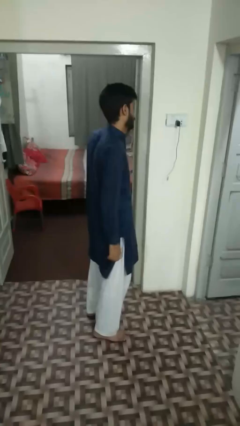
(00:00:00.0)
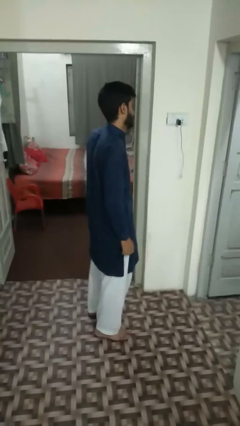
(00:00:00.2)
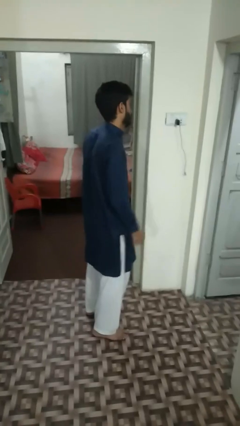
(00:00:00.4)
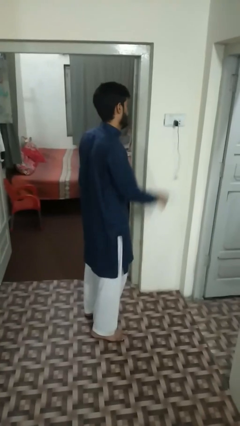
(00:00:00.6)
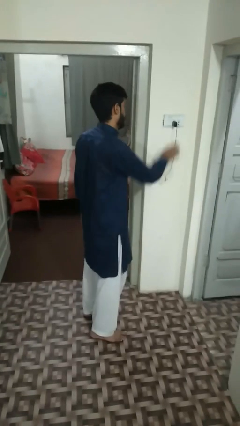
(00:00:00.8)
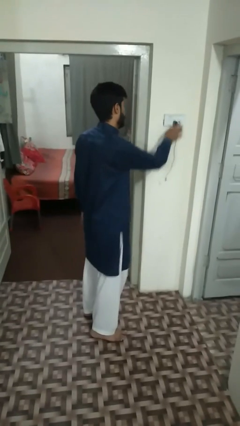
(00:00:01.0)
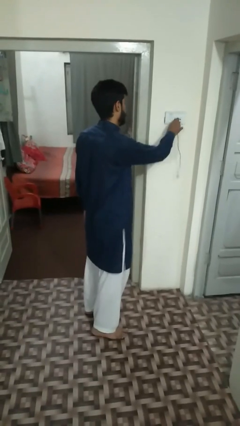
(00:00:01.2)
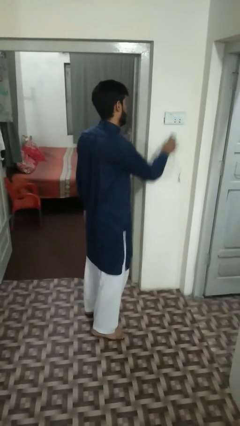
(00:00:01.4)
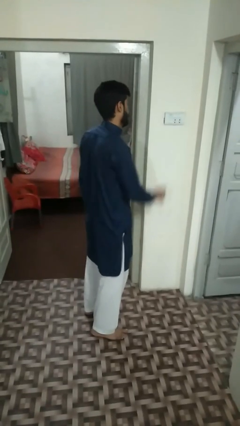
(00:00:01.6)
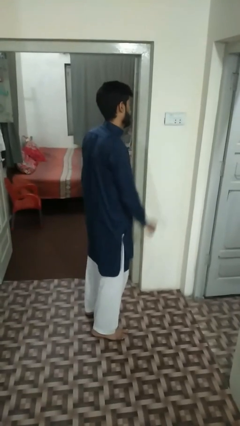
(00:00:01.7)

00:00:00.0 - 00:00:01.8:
person unplugs from electrical socket

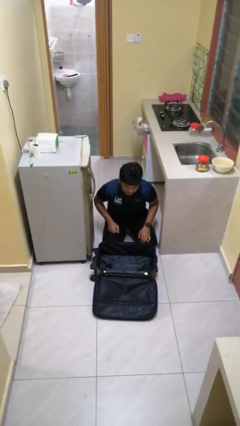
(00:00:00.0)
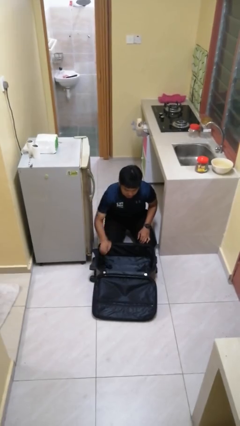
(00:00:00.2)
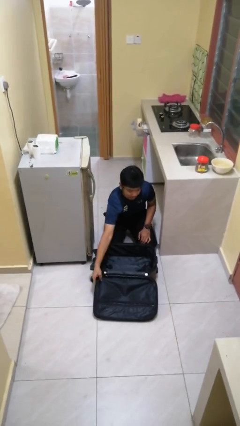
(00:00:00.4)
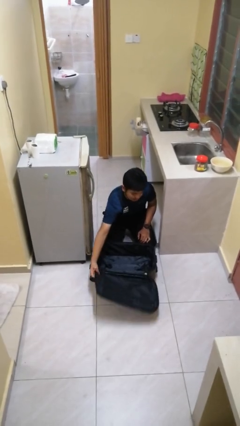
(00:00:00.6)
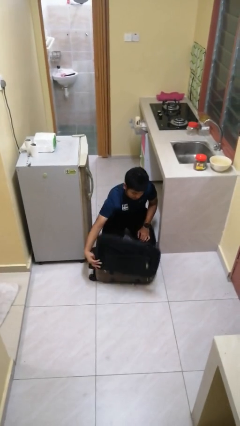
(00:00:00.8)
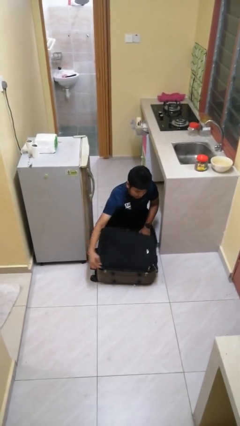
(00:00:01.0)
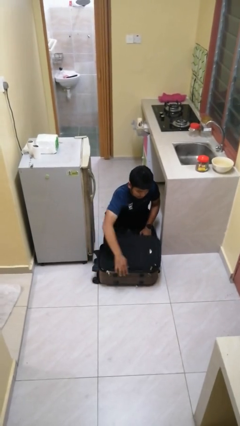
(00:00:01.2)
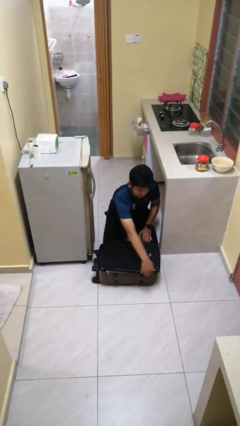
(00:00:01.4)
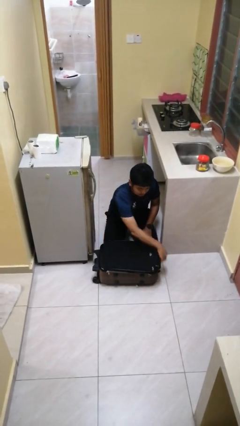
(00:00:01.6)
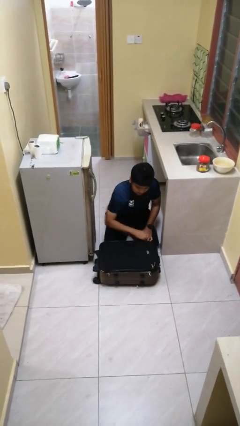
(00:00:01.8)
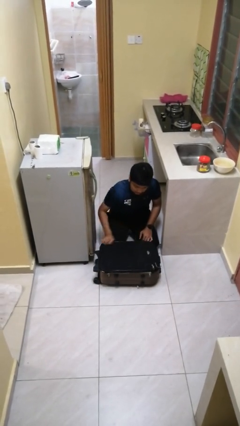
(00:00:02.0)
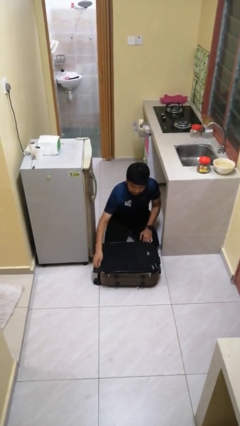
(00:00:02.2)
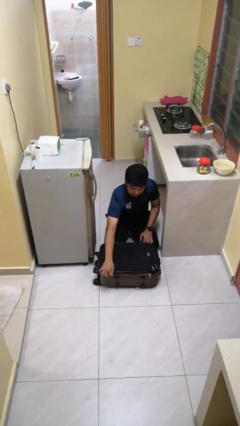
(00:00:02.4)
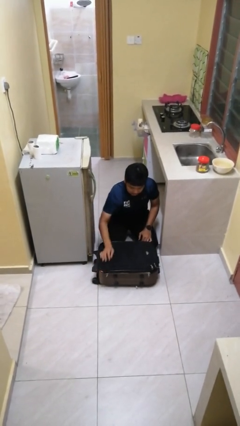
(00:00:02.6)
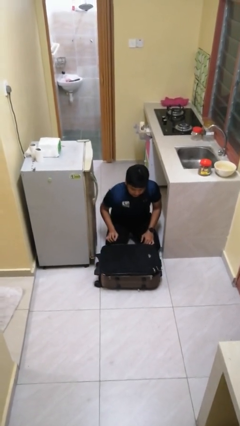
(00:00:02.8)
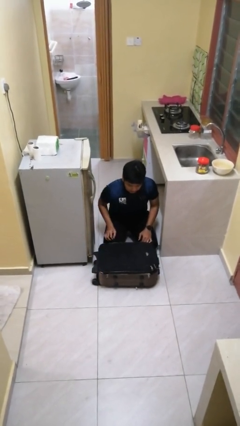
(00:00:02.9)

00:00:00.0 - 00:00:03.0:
person closes suitcase

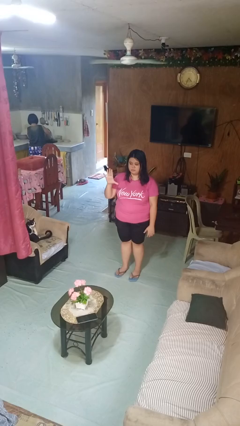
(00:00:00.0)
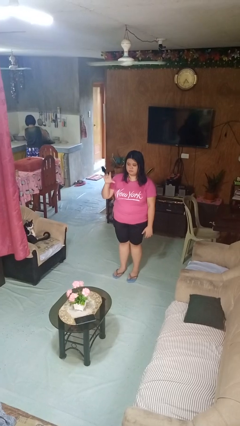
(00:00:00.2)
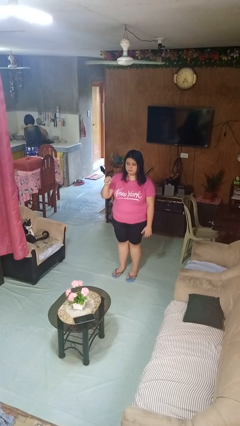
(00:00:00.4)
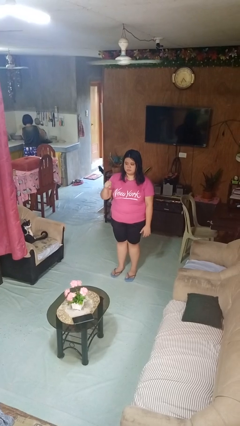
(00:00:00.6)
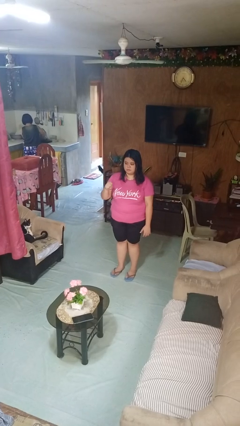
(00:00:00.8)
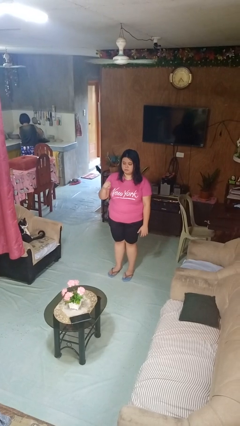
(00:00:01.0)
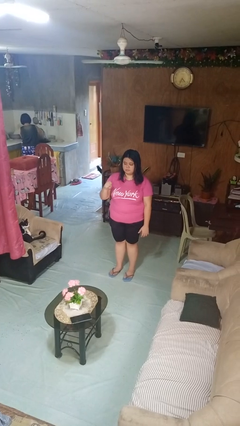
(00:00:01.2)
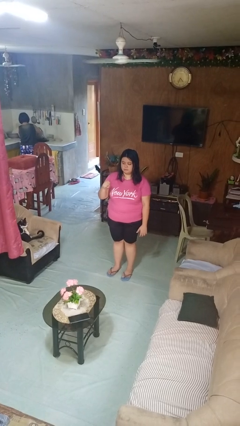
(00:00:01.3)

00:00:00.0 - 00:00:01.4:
person gestures zoom out

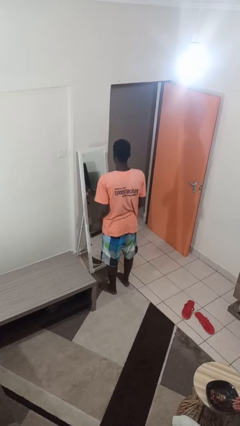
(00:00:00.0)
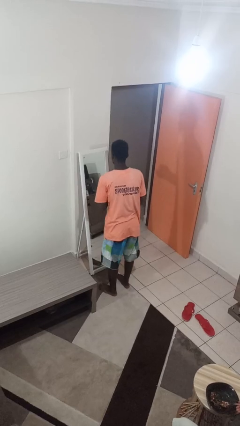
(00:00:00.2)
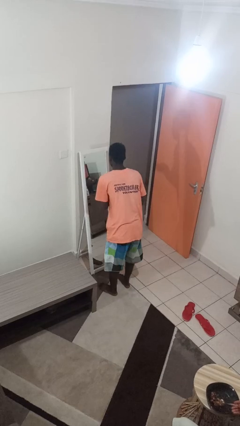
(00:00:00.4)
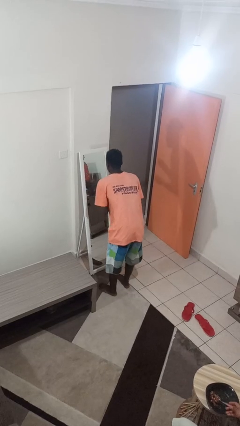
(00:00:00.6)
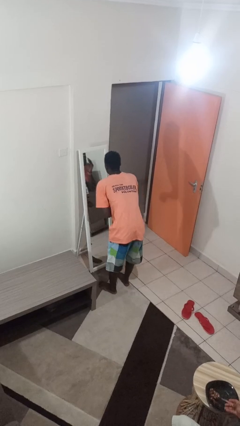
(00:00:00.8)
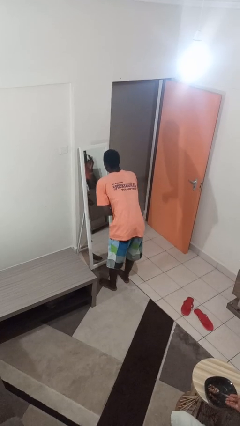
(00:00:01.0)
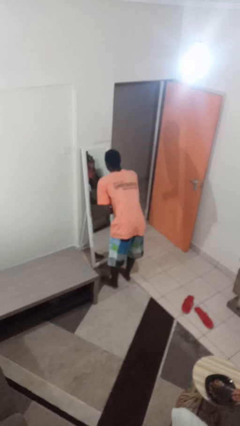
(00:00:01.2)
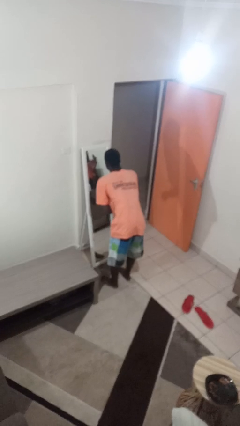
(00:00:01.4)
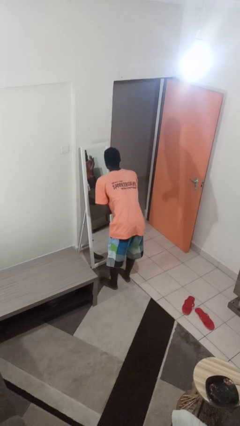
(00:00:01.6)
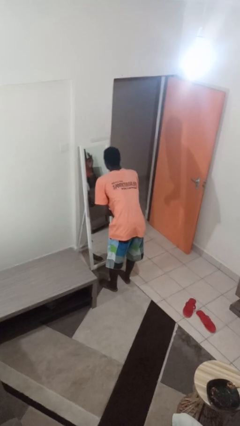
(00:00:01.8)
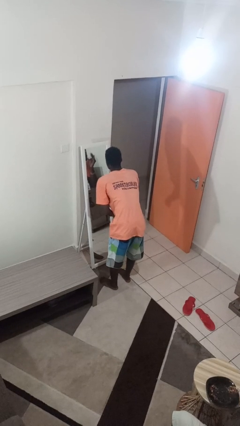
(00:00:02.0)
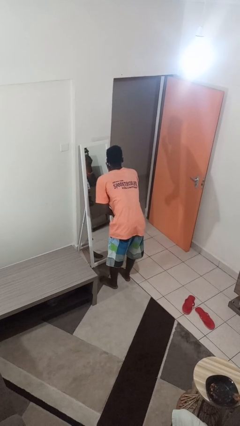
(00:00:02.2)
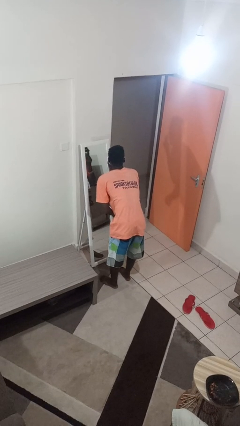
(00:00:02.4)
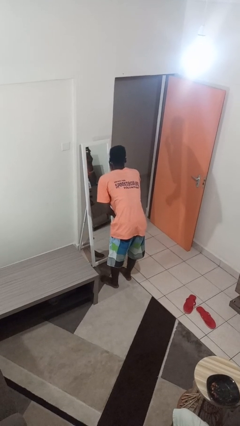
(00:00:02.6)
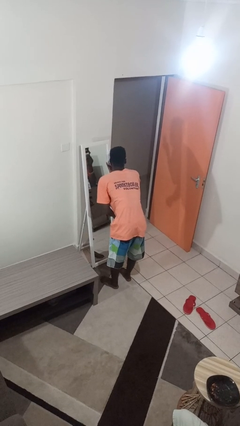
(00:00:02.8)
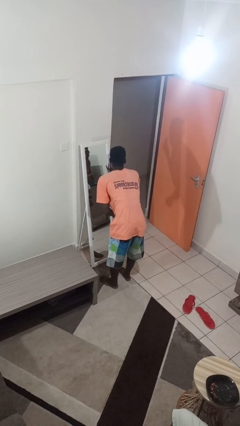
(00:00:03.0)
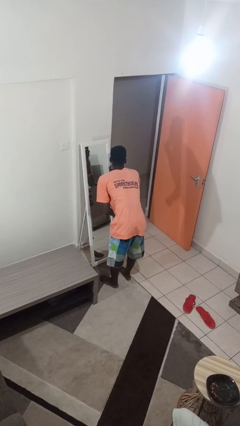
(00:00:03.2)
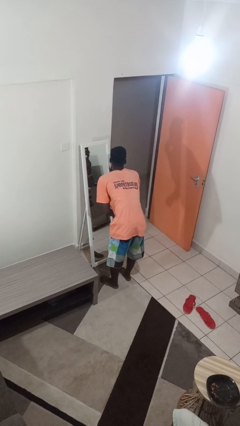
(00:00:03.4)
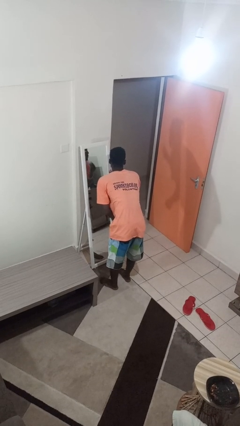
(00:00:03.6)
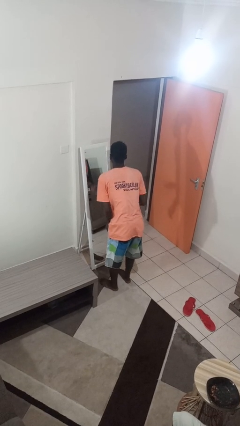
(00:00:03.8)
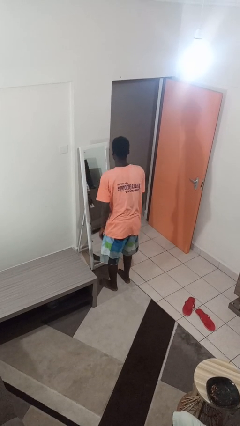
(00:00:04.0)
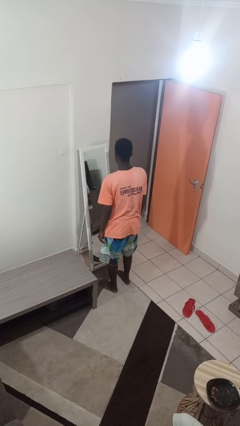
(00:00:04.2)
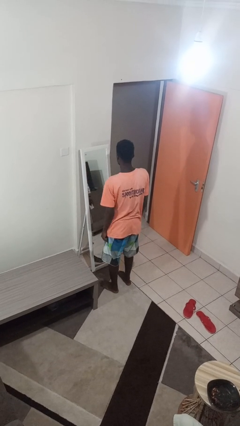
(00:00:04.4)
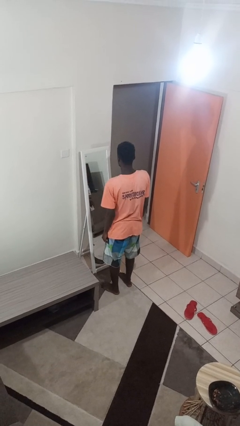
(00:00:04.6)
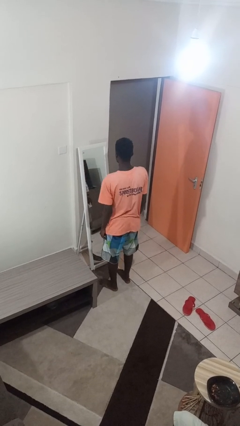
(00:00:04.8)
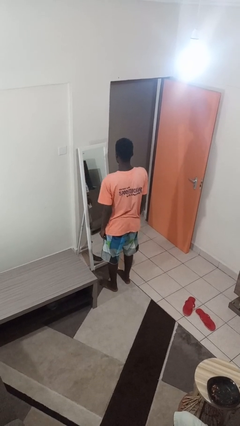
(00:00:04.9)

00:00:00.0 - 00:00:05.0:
person applies foundation makeup

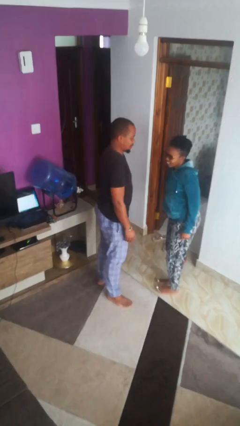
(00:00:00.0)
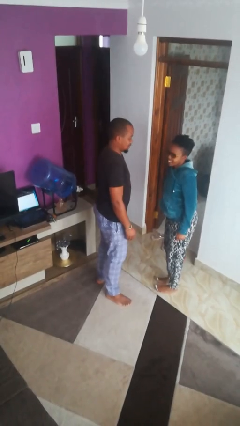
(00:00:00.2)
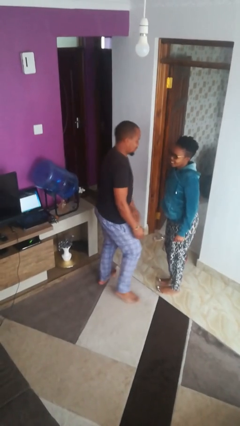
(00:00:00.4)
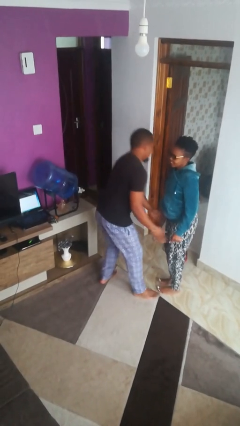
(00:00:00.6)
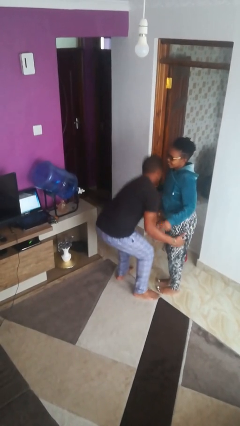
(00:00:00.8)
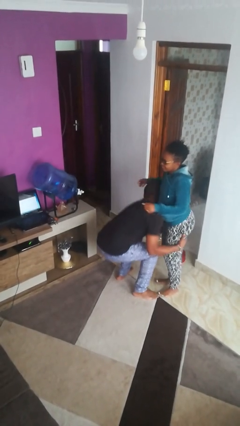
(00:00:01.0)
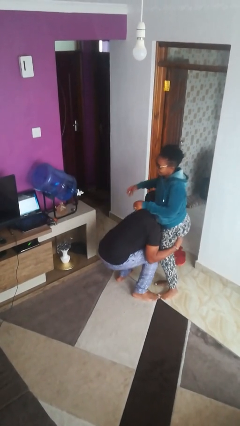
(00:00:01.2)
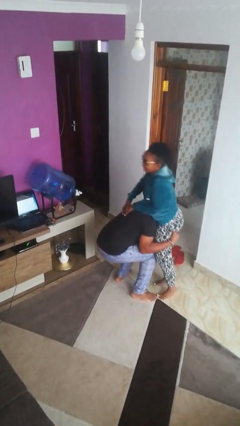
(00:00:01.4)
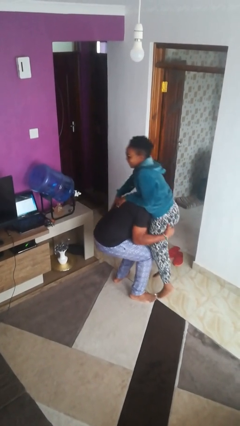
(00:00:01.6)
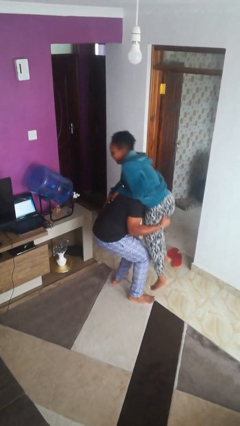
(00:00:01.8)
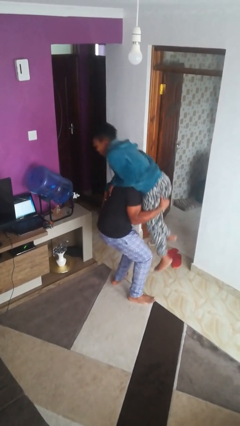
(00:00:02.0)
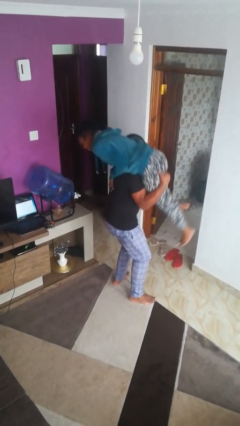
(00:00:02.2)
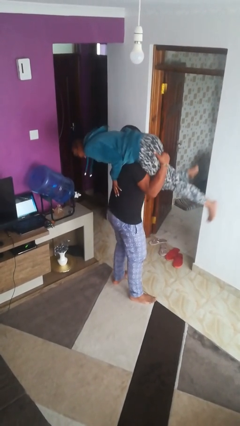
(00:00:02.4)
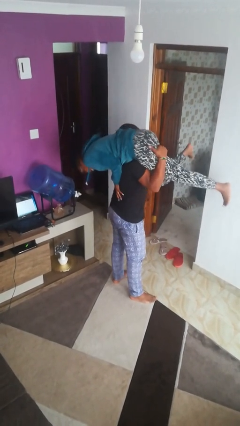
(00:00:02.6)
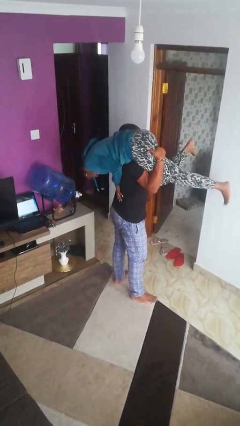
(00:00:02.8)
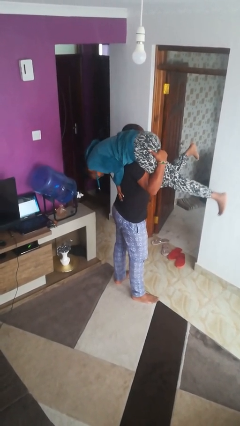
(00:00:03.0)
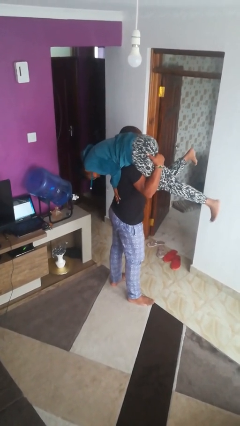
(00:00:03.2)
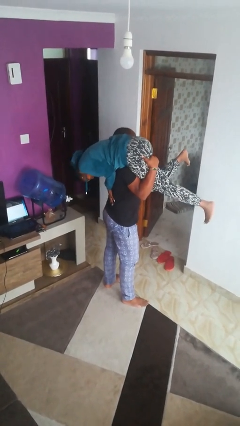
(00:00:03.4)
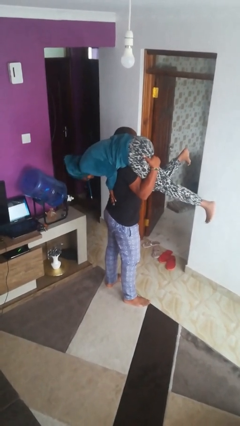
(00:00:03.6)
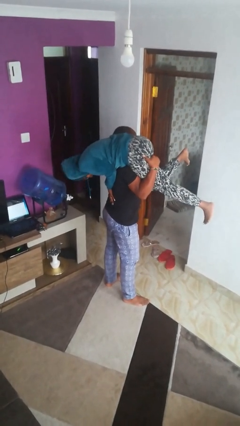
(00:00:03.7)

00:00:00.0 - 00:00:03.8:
person carries person over shoulder

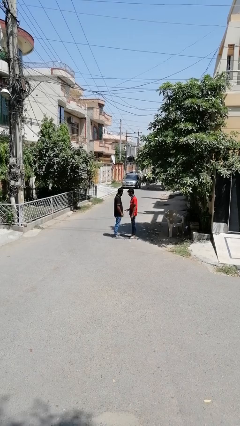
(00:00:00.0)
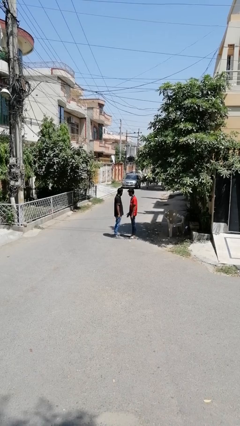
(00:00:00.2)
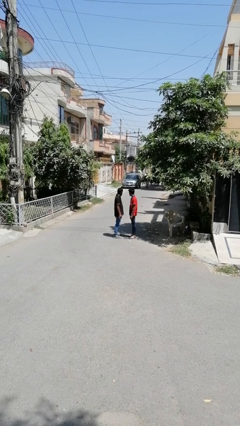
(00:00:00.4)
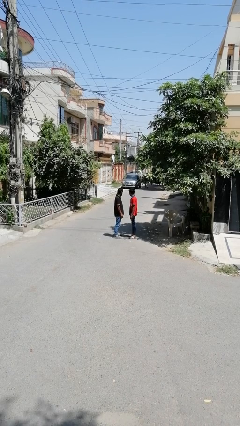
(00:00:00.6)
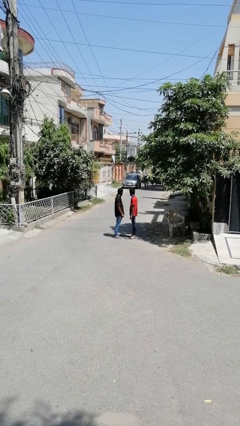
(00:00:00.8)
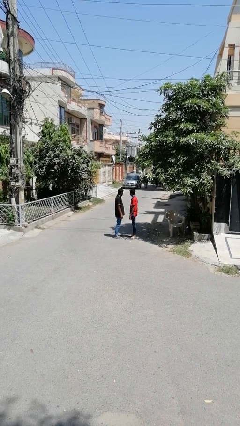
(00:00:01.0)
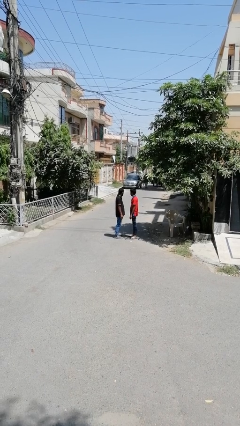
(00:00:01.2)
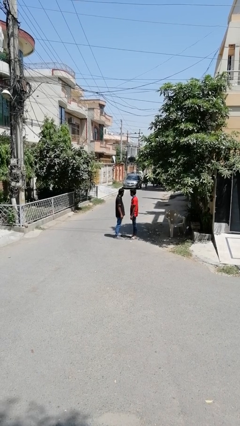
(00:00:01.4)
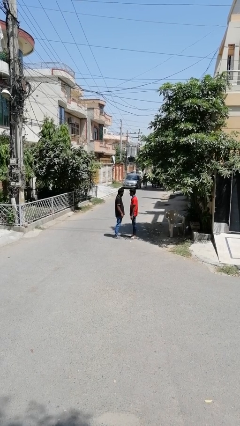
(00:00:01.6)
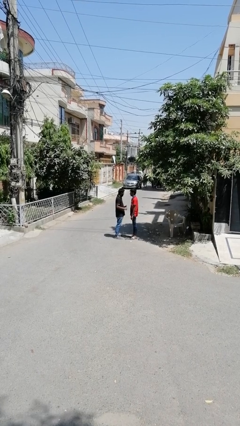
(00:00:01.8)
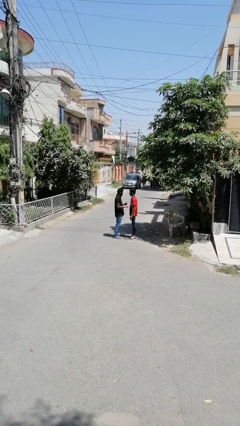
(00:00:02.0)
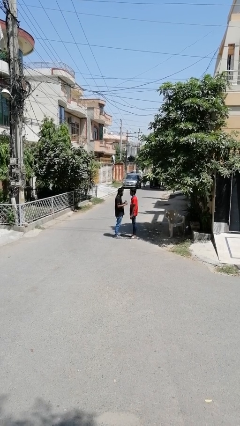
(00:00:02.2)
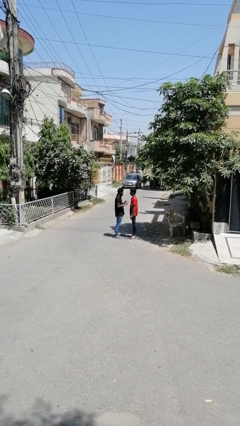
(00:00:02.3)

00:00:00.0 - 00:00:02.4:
person highfives hand
